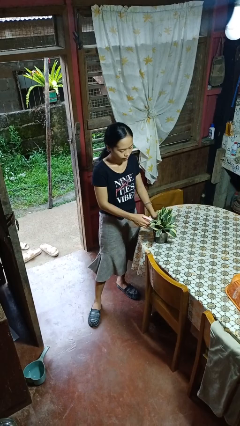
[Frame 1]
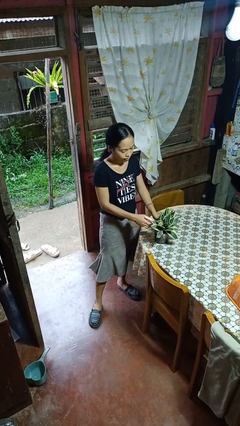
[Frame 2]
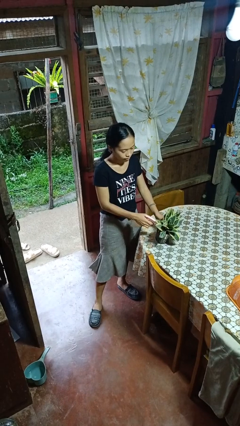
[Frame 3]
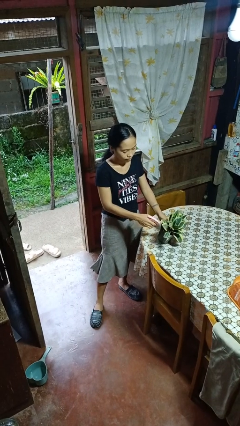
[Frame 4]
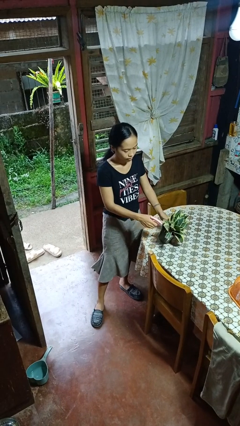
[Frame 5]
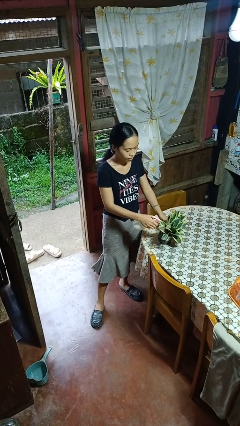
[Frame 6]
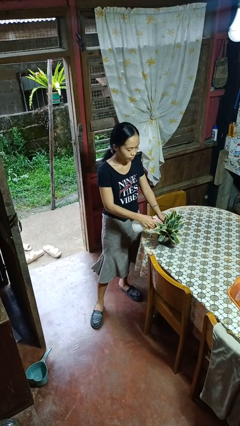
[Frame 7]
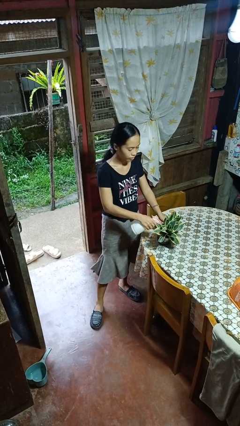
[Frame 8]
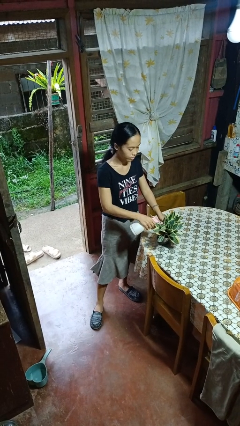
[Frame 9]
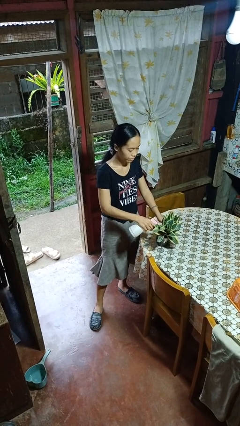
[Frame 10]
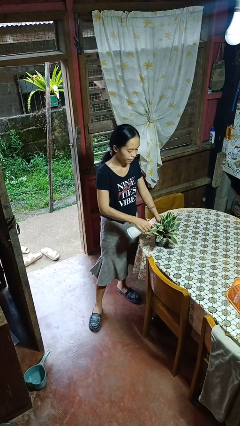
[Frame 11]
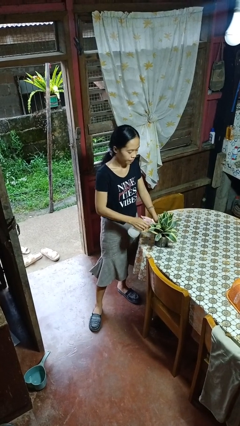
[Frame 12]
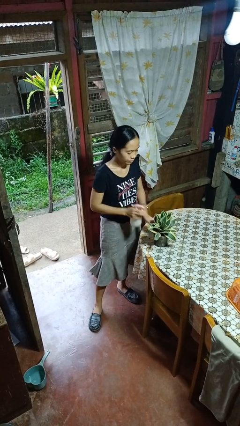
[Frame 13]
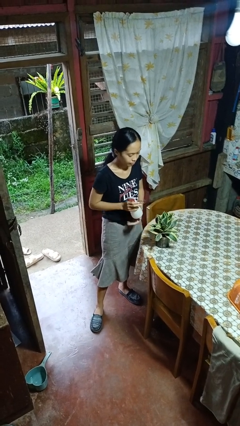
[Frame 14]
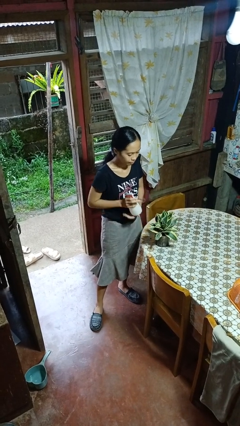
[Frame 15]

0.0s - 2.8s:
person waters houseplant

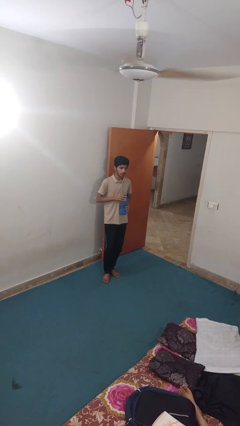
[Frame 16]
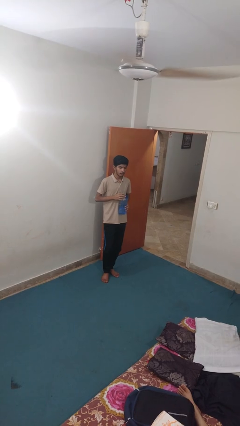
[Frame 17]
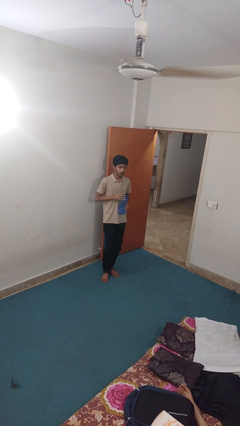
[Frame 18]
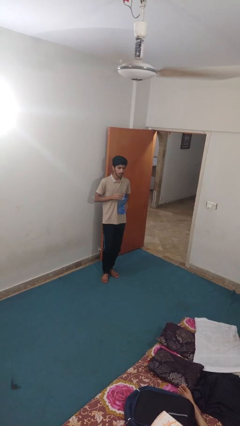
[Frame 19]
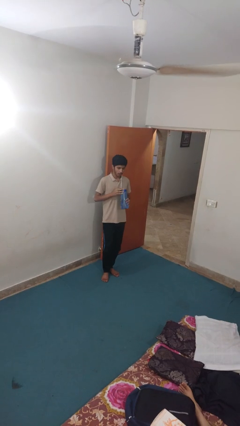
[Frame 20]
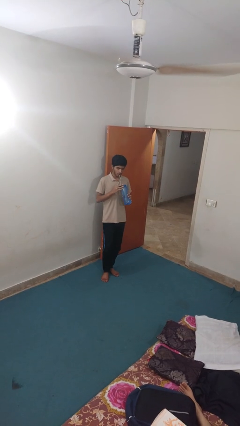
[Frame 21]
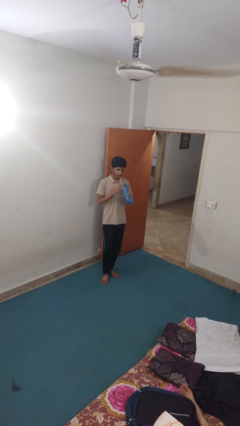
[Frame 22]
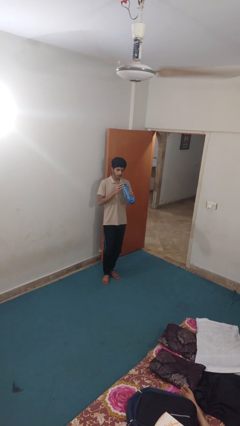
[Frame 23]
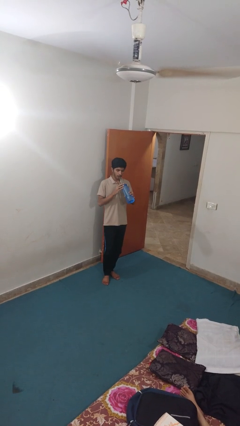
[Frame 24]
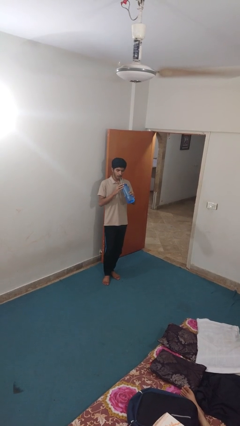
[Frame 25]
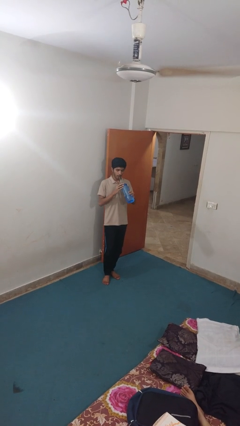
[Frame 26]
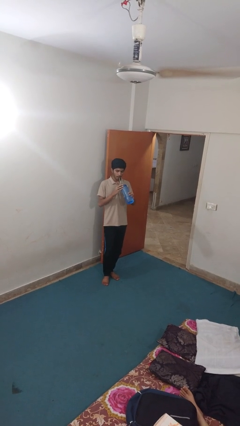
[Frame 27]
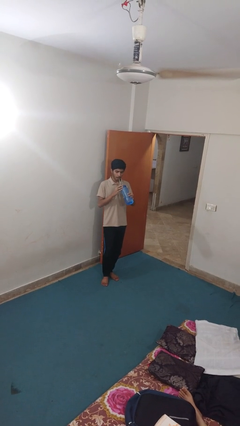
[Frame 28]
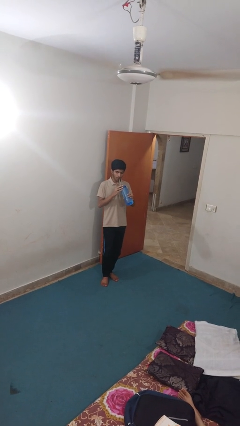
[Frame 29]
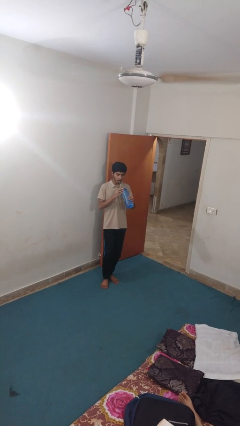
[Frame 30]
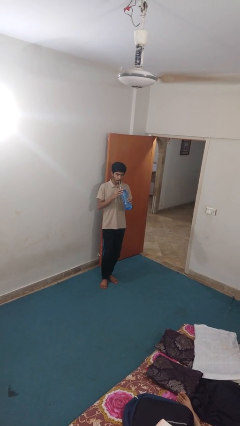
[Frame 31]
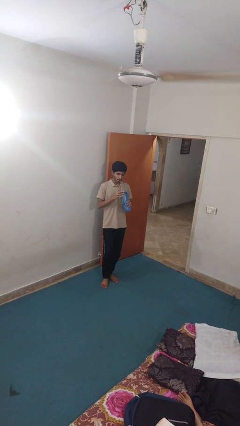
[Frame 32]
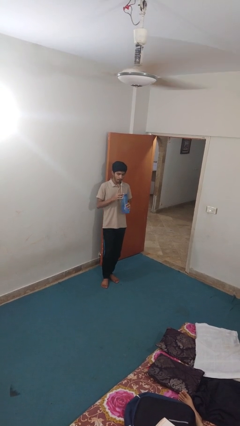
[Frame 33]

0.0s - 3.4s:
person drinks from straw

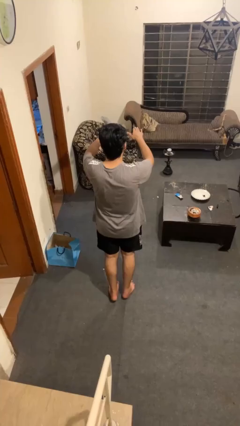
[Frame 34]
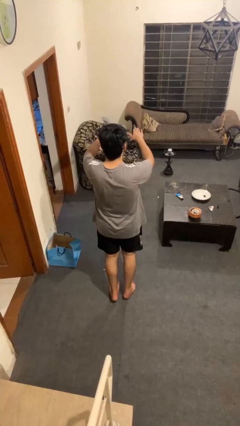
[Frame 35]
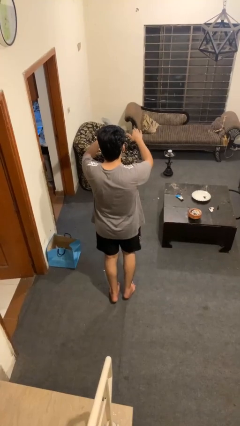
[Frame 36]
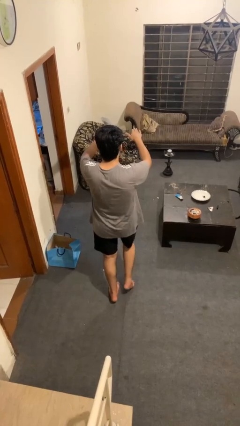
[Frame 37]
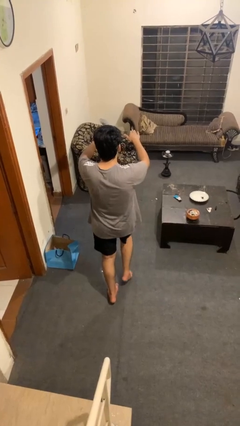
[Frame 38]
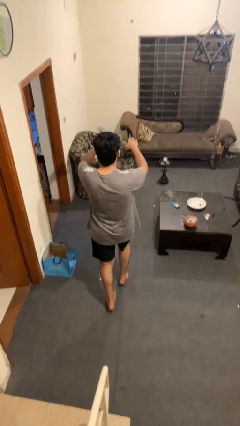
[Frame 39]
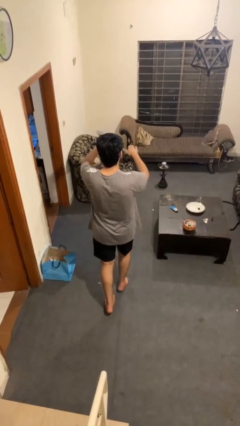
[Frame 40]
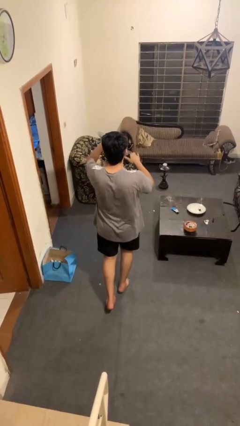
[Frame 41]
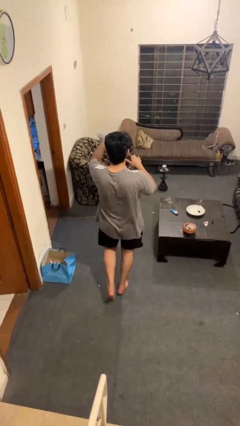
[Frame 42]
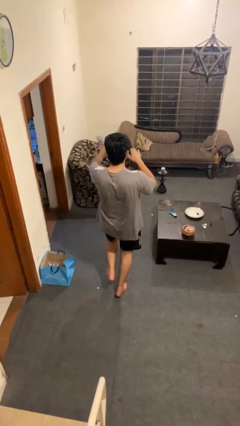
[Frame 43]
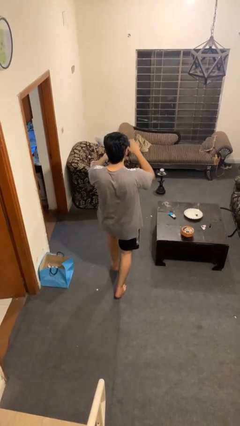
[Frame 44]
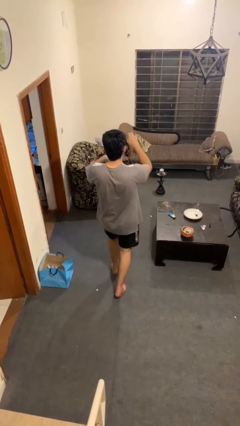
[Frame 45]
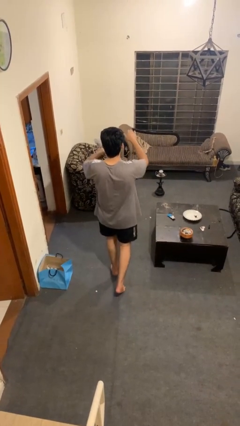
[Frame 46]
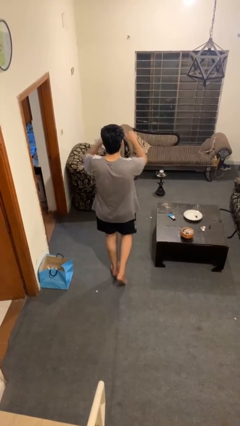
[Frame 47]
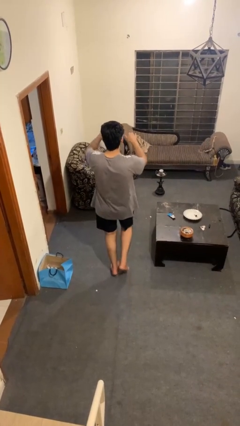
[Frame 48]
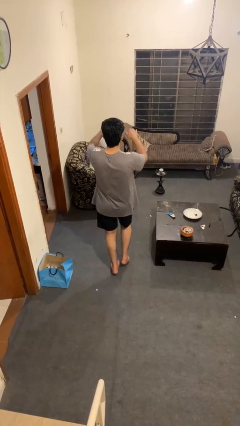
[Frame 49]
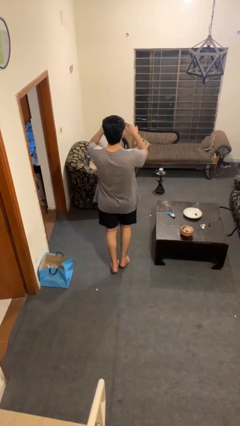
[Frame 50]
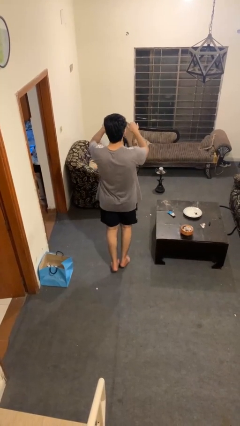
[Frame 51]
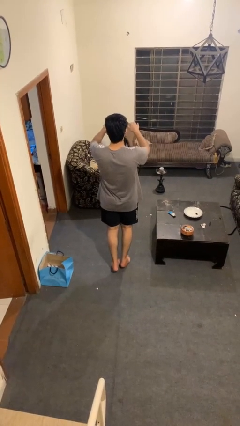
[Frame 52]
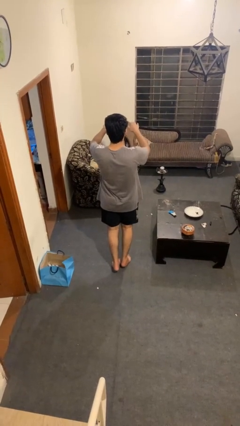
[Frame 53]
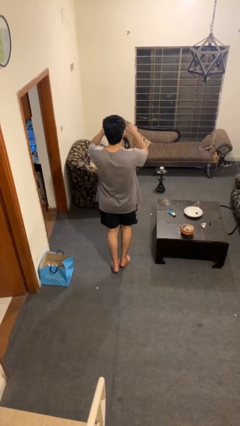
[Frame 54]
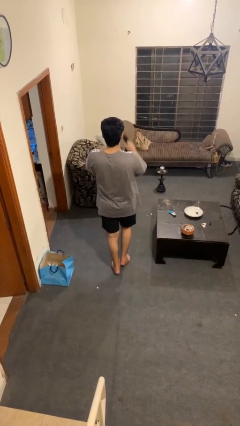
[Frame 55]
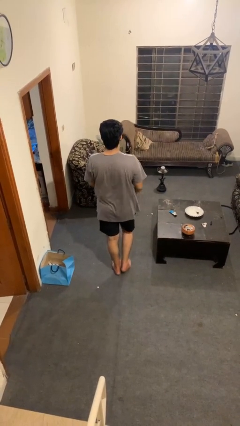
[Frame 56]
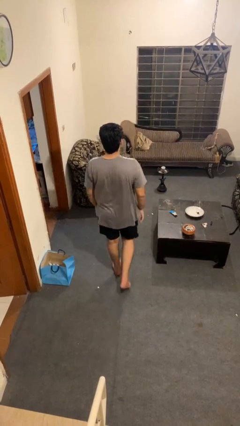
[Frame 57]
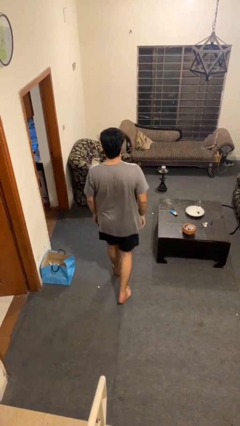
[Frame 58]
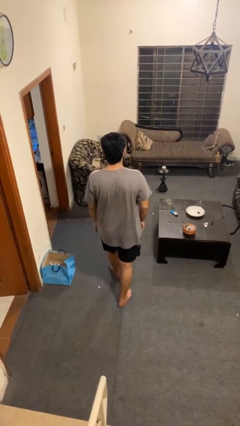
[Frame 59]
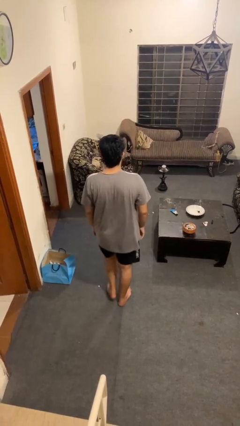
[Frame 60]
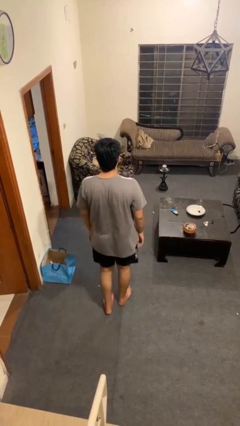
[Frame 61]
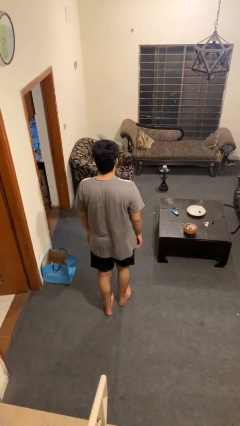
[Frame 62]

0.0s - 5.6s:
person walks tiptoe

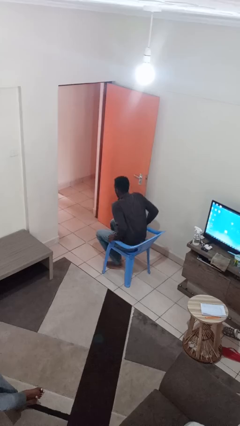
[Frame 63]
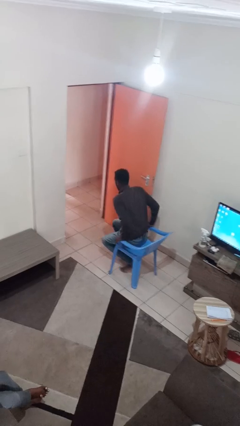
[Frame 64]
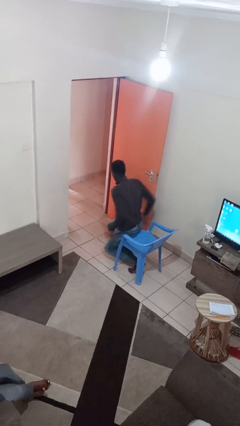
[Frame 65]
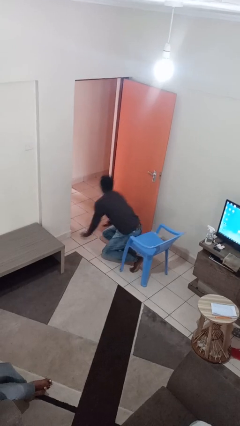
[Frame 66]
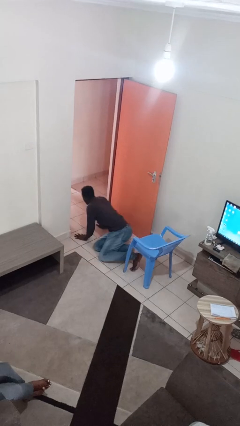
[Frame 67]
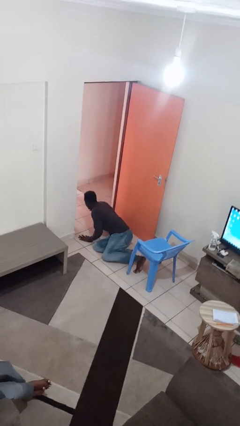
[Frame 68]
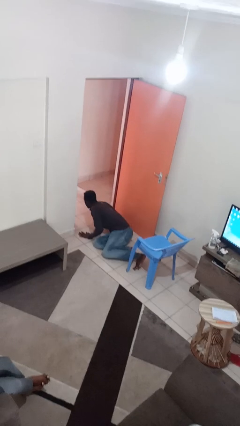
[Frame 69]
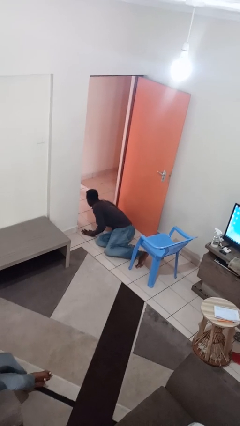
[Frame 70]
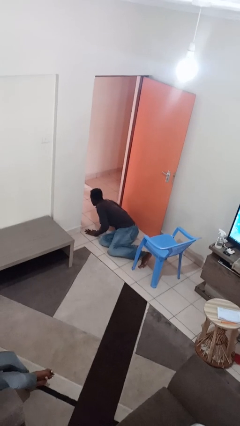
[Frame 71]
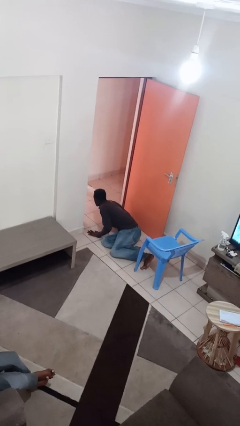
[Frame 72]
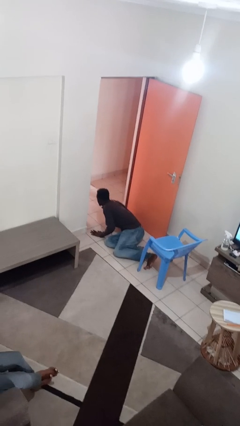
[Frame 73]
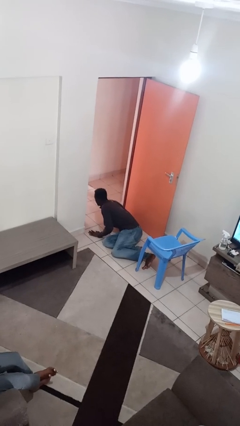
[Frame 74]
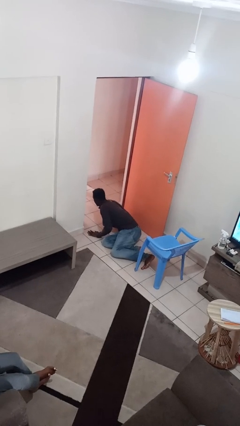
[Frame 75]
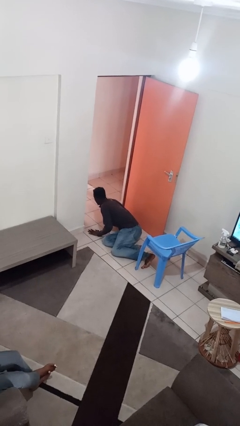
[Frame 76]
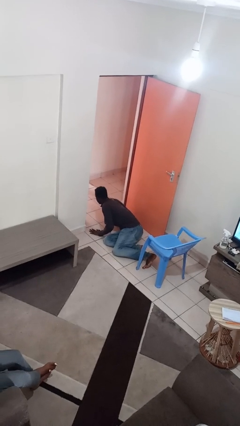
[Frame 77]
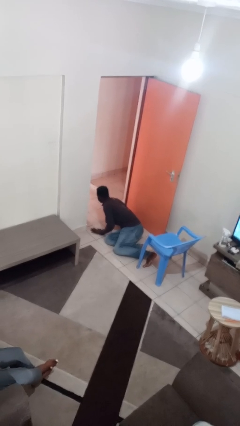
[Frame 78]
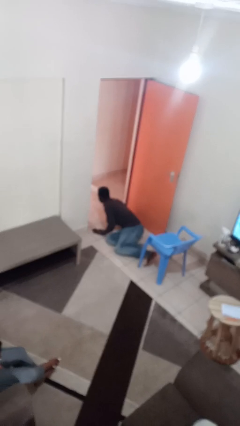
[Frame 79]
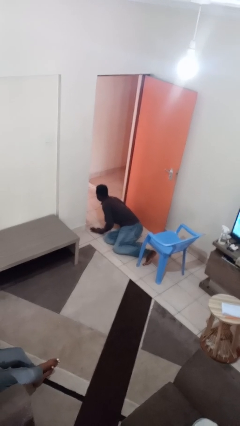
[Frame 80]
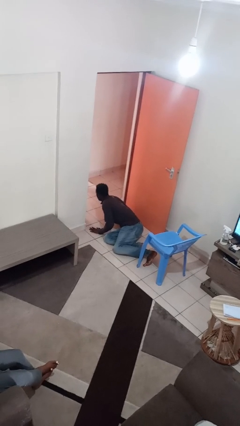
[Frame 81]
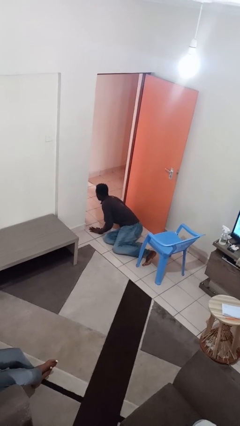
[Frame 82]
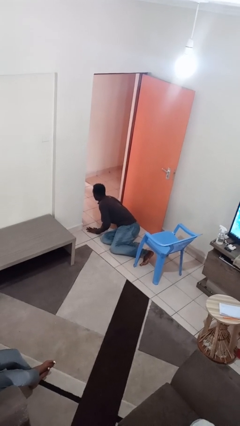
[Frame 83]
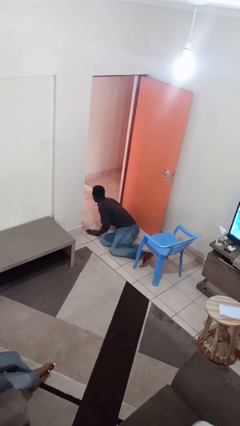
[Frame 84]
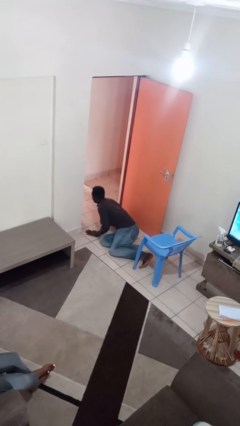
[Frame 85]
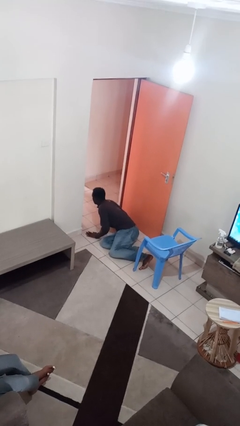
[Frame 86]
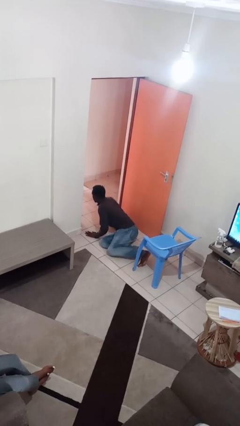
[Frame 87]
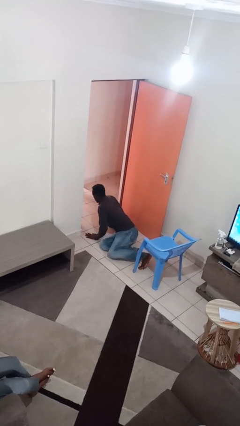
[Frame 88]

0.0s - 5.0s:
person falls from chair

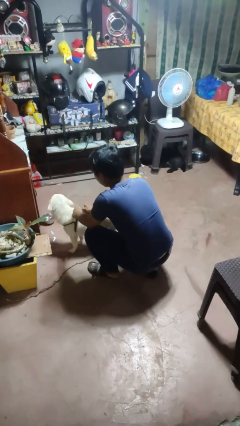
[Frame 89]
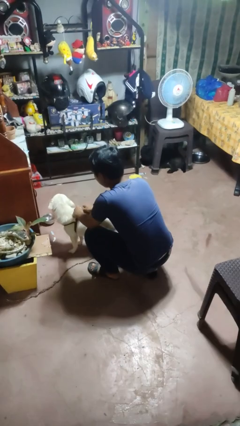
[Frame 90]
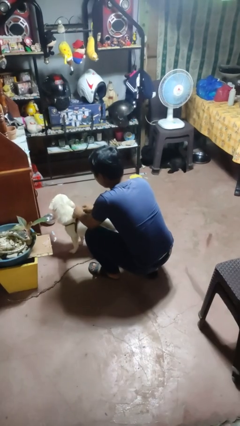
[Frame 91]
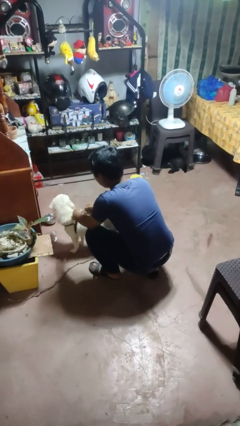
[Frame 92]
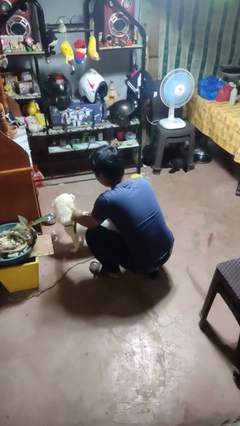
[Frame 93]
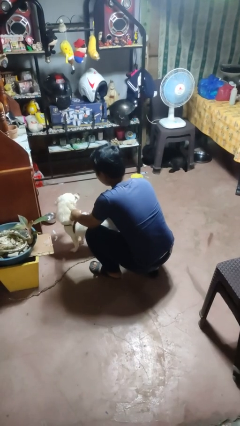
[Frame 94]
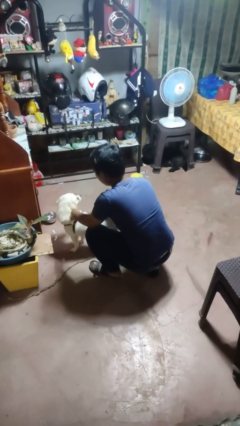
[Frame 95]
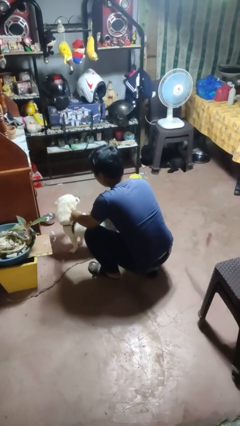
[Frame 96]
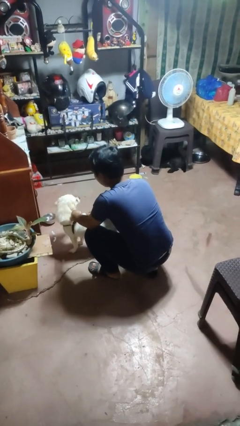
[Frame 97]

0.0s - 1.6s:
person attaches leash to dog
